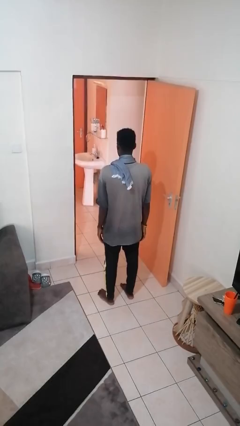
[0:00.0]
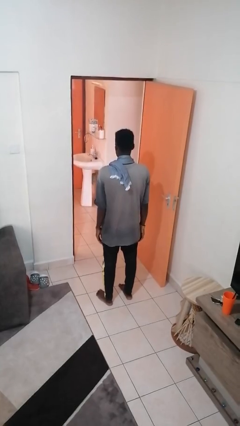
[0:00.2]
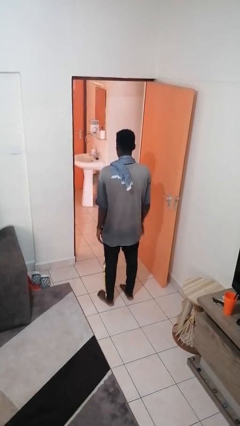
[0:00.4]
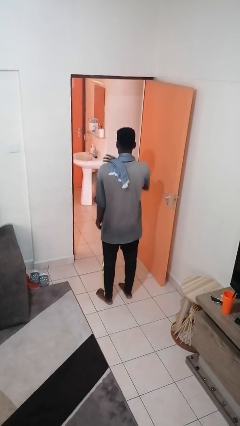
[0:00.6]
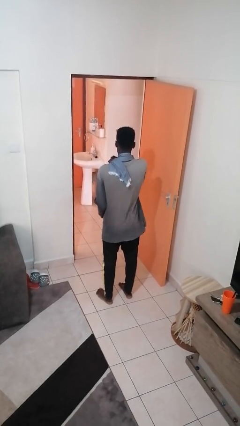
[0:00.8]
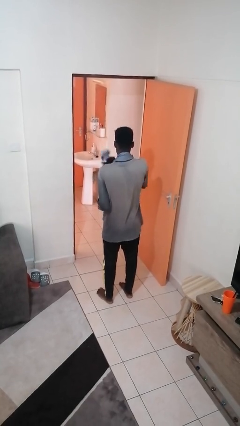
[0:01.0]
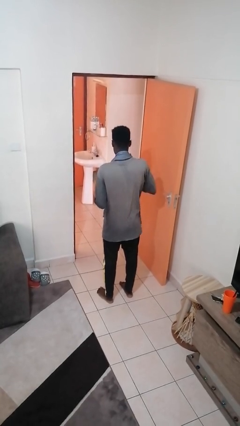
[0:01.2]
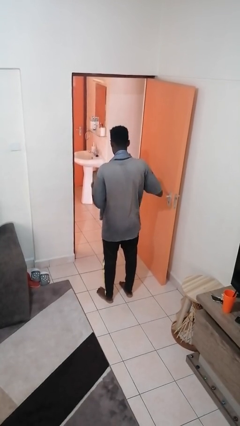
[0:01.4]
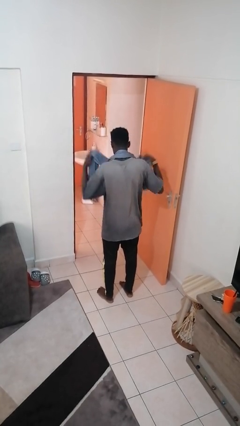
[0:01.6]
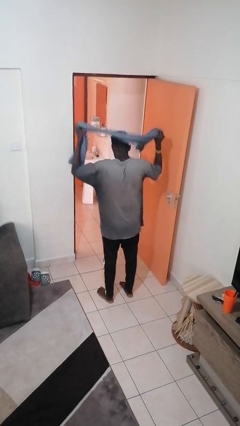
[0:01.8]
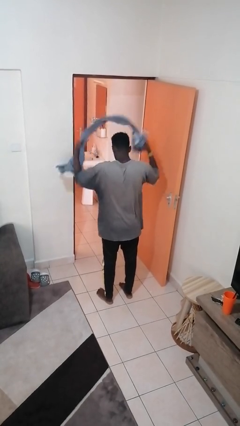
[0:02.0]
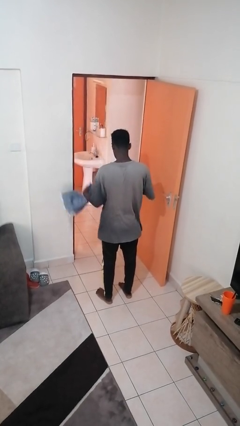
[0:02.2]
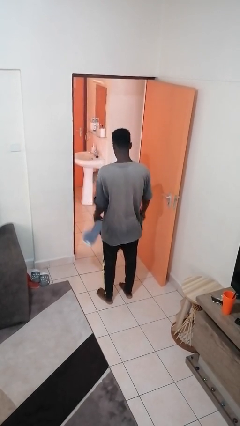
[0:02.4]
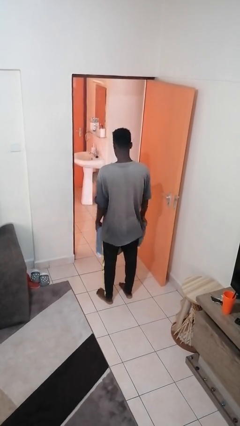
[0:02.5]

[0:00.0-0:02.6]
person takes off scarf

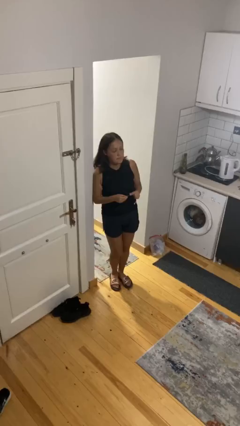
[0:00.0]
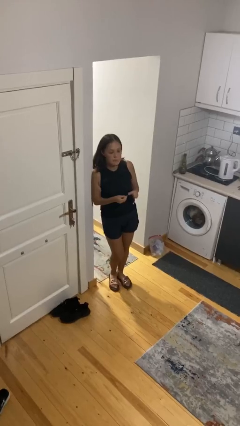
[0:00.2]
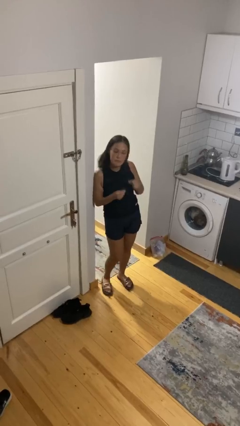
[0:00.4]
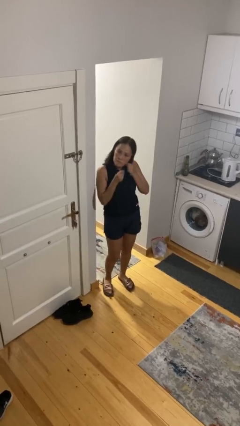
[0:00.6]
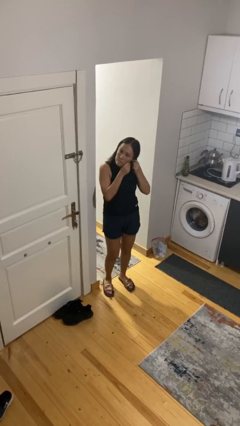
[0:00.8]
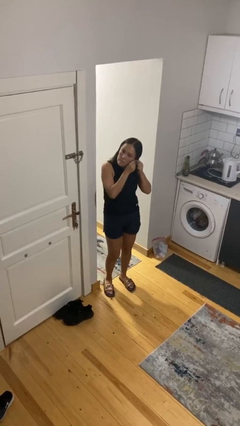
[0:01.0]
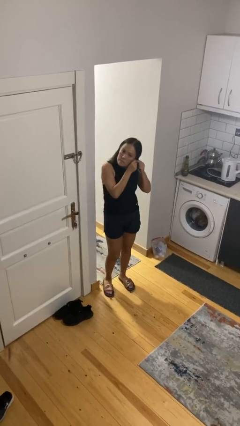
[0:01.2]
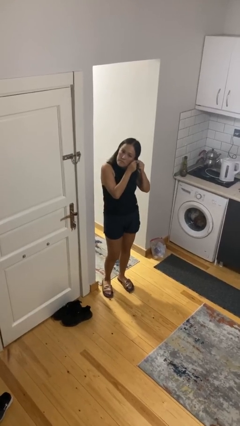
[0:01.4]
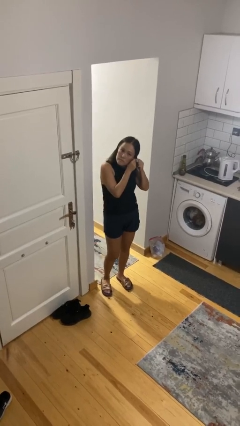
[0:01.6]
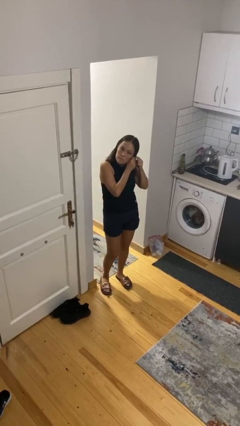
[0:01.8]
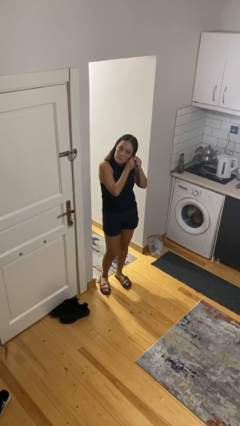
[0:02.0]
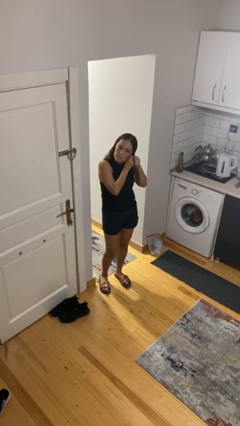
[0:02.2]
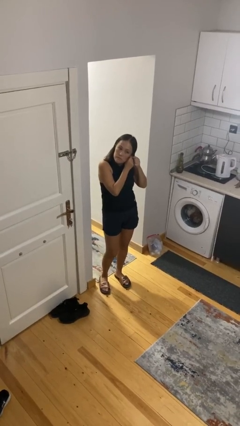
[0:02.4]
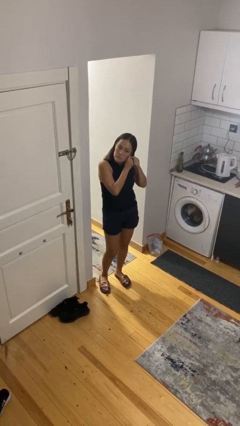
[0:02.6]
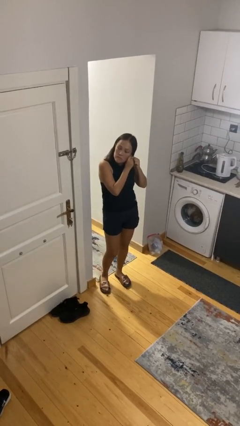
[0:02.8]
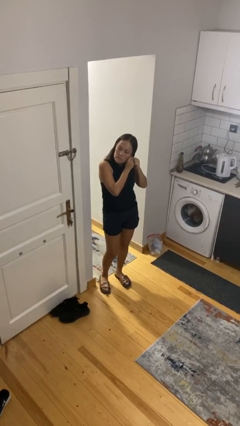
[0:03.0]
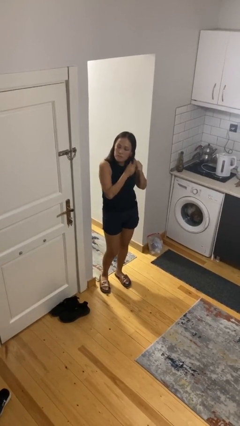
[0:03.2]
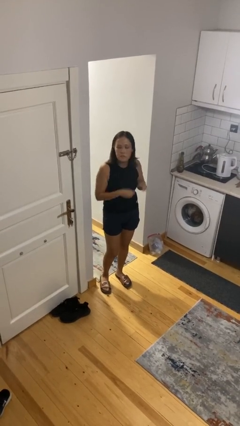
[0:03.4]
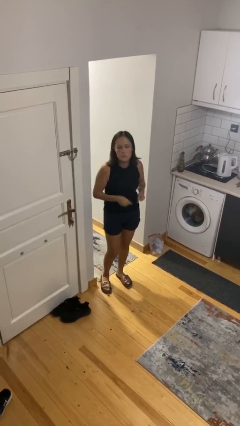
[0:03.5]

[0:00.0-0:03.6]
person puts on earrings

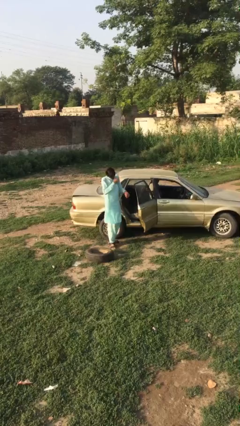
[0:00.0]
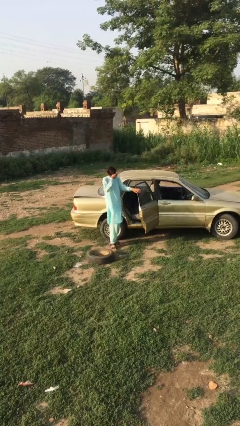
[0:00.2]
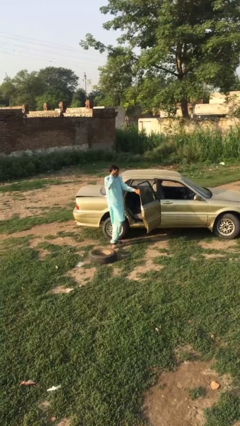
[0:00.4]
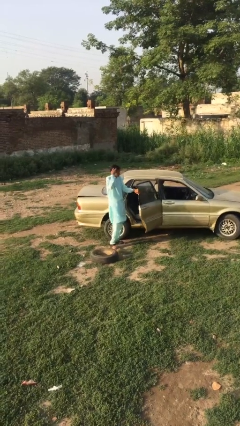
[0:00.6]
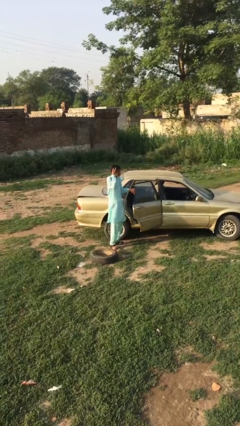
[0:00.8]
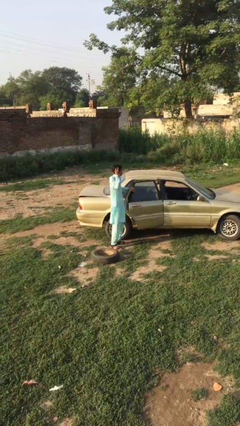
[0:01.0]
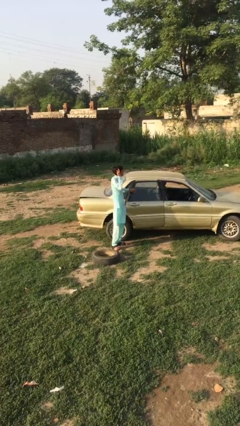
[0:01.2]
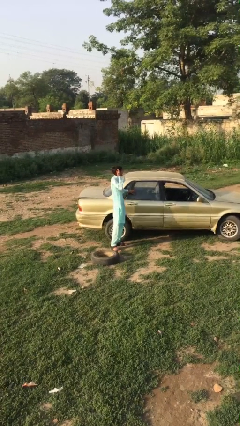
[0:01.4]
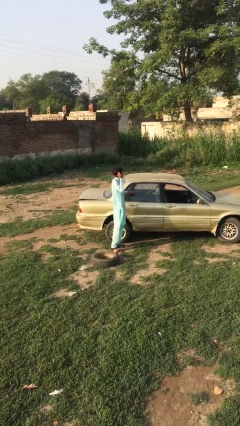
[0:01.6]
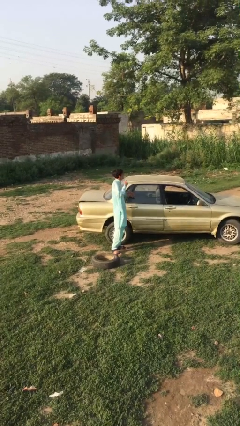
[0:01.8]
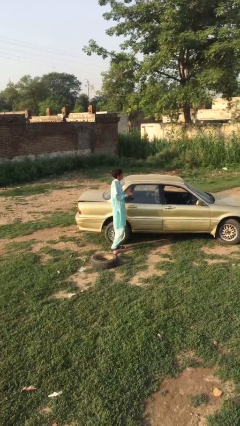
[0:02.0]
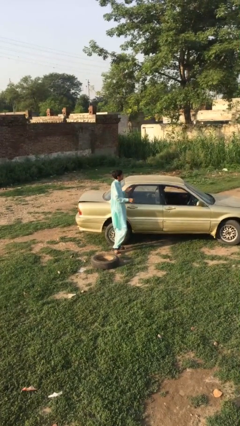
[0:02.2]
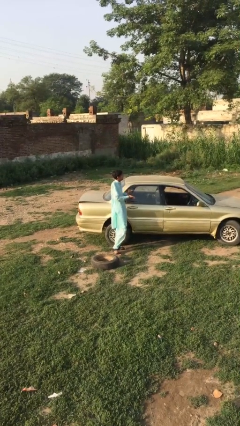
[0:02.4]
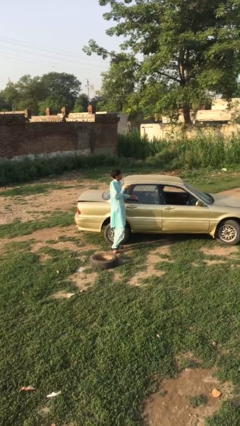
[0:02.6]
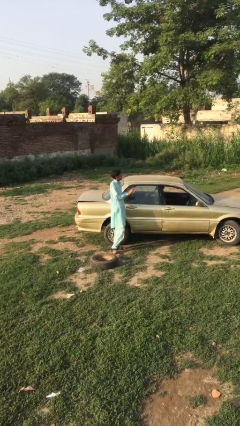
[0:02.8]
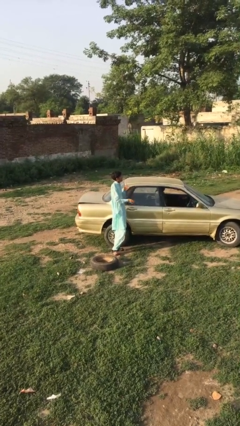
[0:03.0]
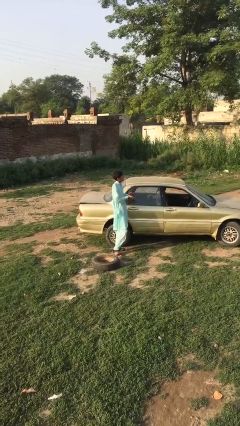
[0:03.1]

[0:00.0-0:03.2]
person closes car door

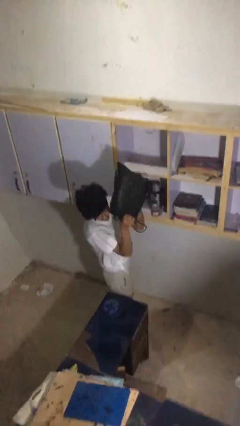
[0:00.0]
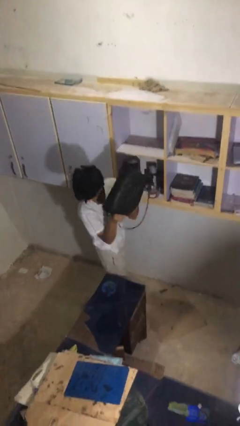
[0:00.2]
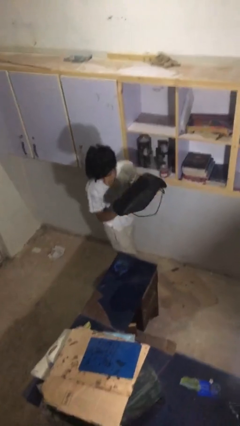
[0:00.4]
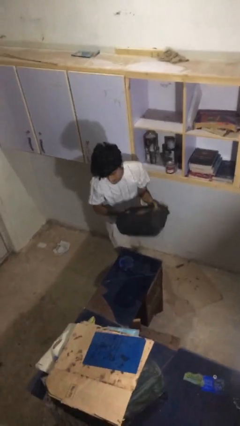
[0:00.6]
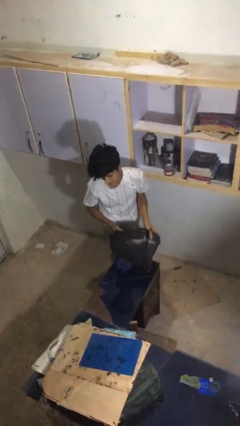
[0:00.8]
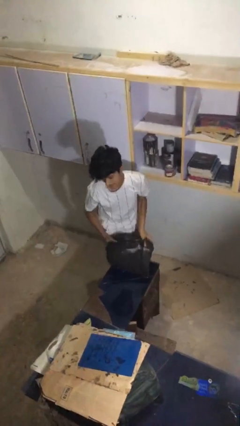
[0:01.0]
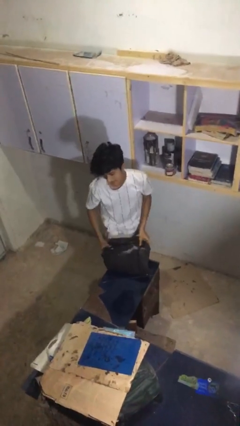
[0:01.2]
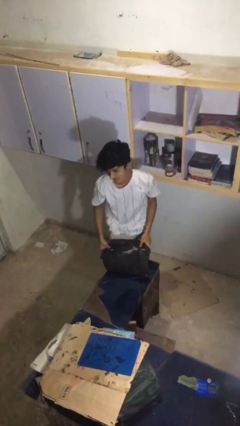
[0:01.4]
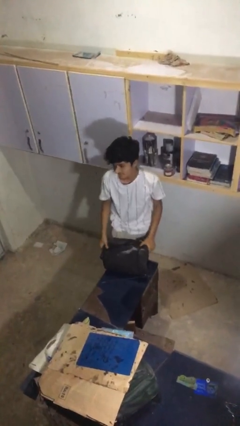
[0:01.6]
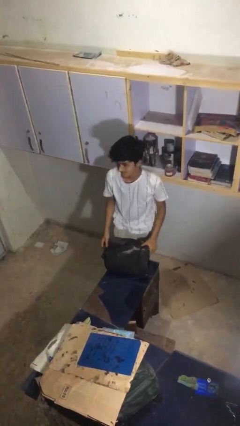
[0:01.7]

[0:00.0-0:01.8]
person puts down object on table

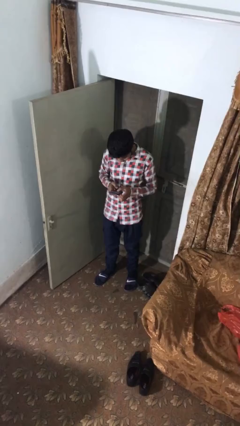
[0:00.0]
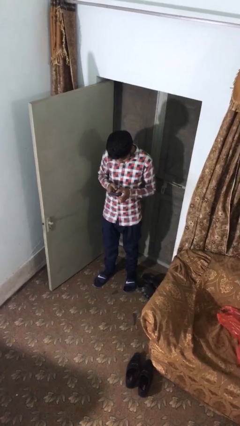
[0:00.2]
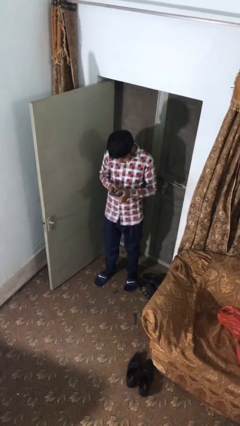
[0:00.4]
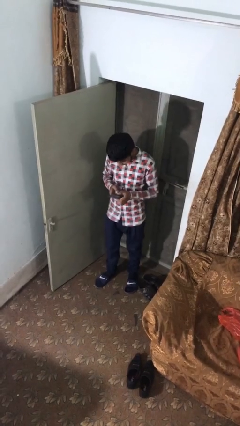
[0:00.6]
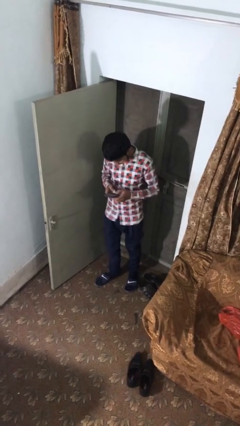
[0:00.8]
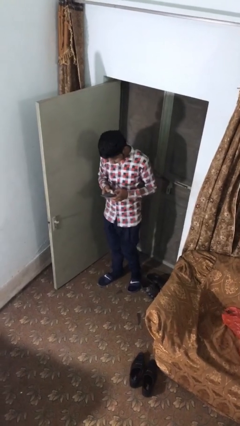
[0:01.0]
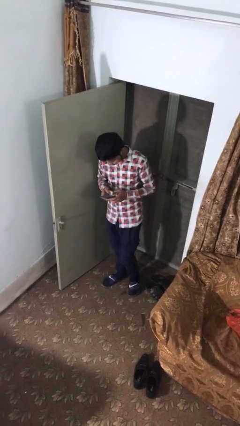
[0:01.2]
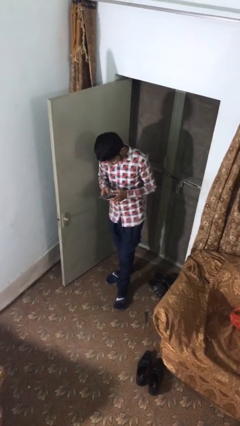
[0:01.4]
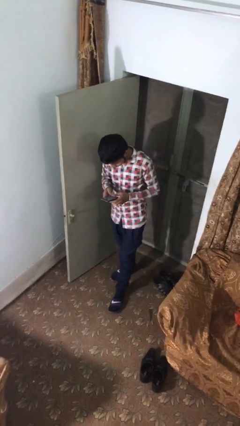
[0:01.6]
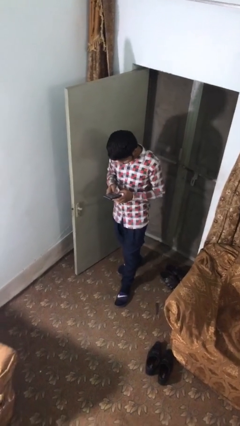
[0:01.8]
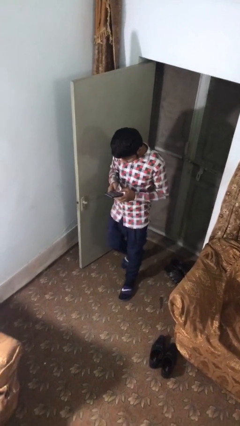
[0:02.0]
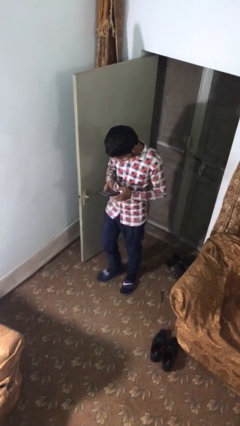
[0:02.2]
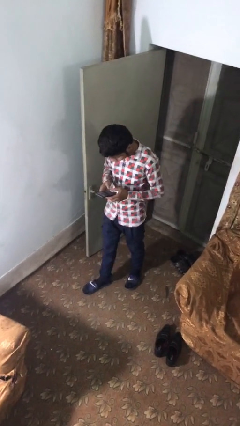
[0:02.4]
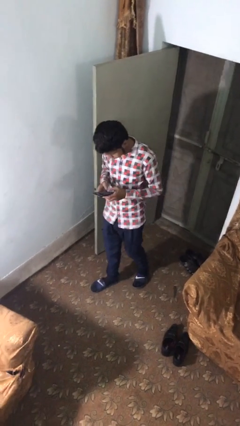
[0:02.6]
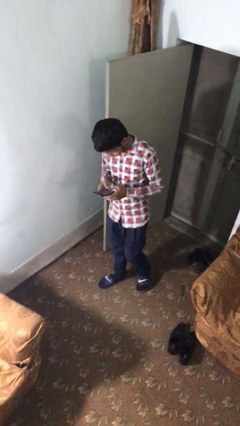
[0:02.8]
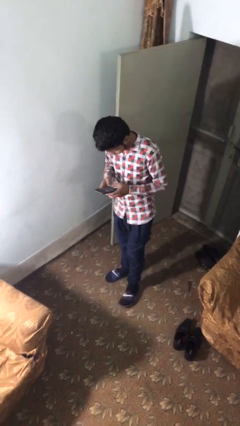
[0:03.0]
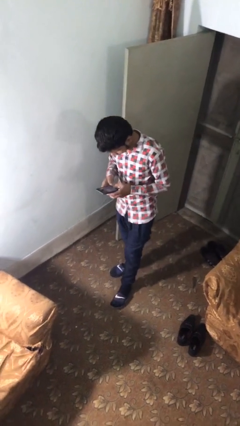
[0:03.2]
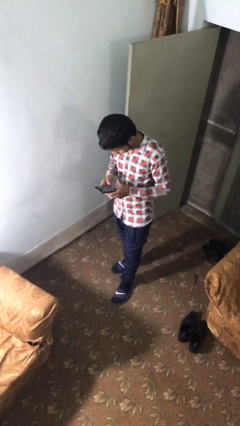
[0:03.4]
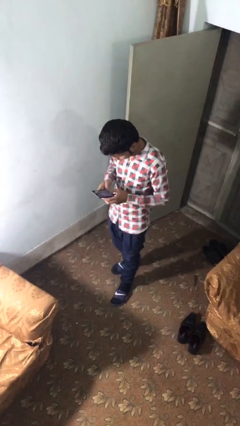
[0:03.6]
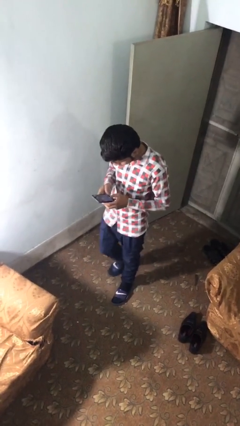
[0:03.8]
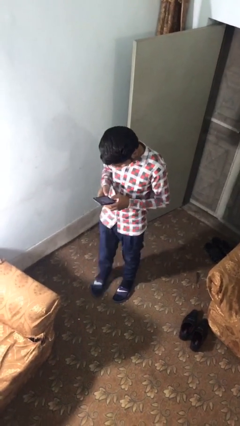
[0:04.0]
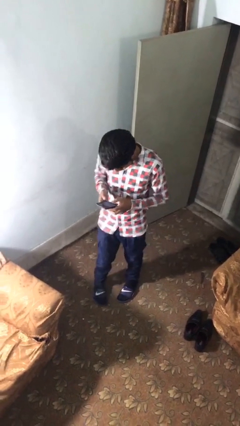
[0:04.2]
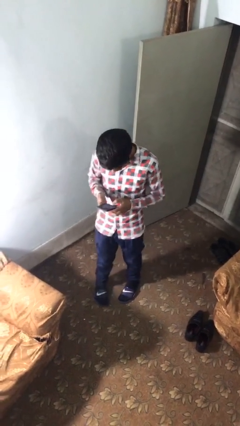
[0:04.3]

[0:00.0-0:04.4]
person texts on phone

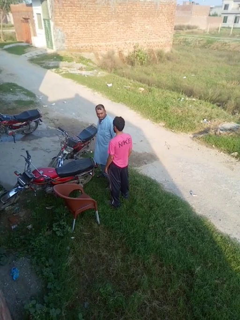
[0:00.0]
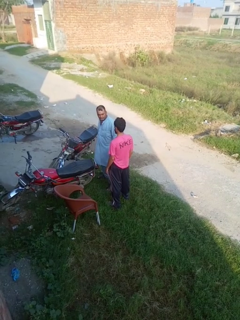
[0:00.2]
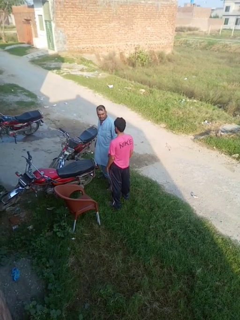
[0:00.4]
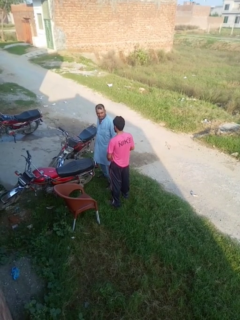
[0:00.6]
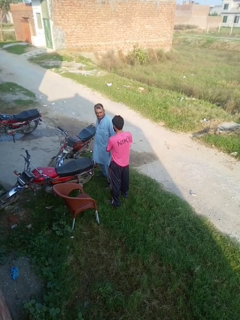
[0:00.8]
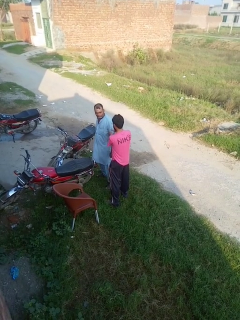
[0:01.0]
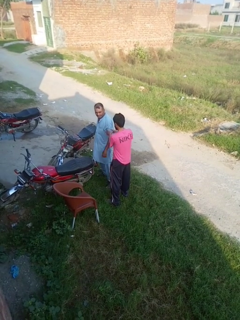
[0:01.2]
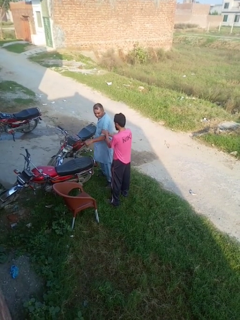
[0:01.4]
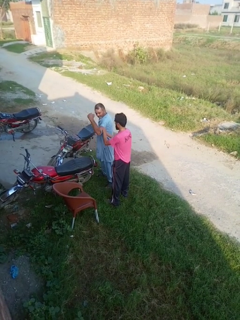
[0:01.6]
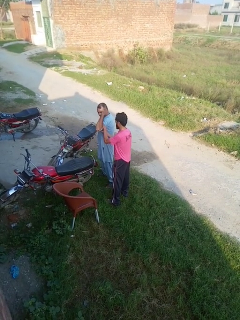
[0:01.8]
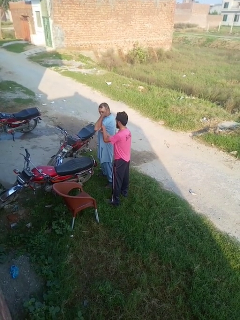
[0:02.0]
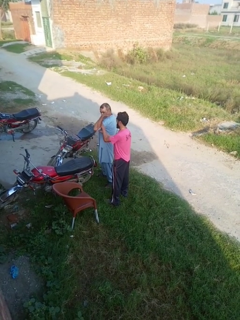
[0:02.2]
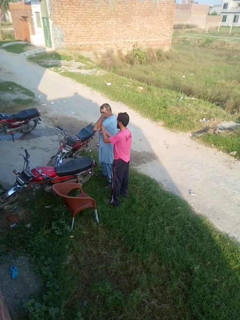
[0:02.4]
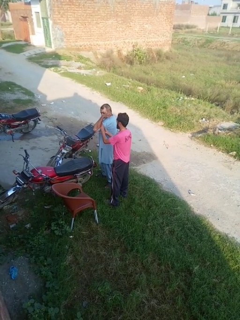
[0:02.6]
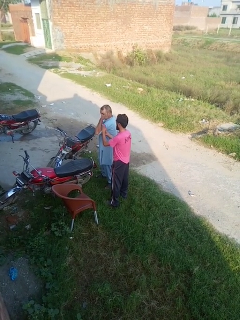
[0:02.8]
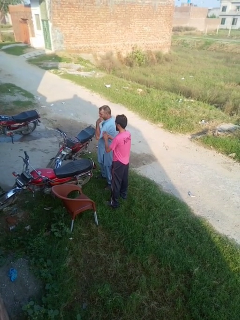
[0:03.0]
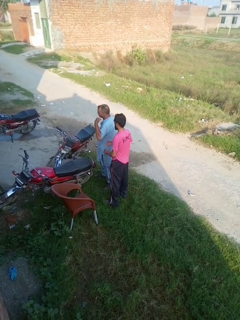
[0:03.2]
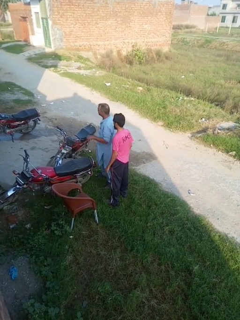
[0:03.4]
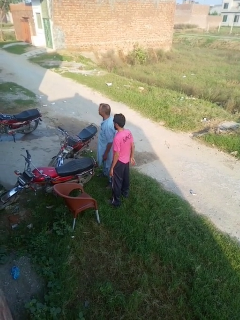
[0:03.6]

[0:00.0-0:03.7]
person grabs person by bicep
